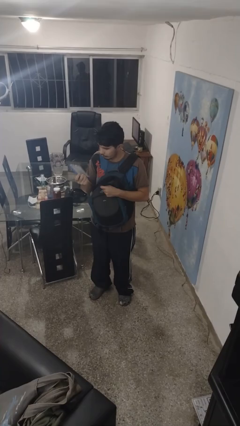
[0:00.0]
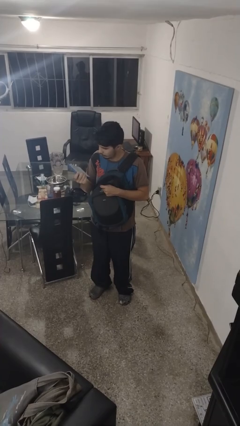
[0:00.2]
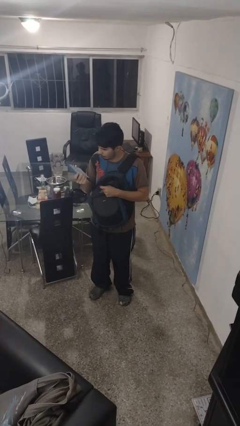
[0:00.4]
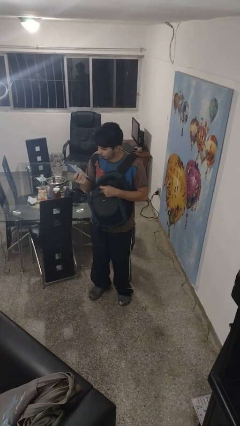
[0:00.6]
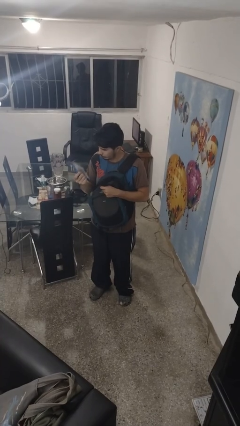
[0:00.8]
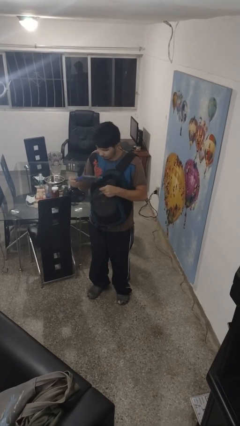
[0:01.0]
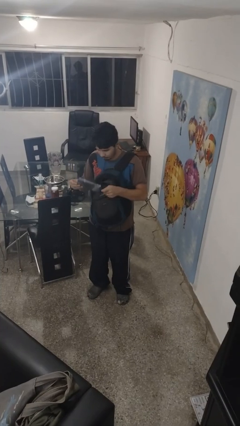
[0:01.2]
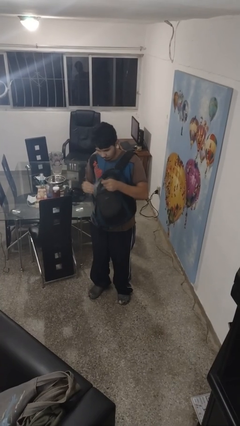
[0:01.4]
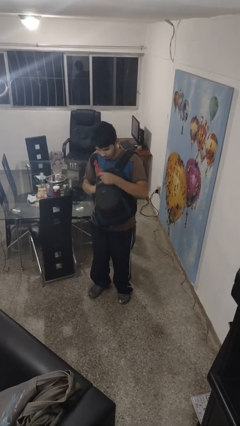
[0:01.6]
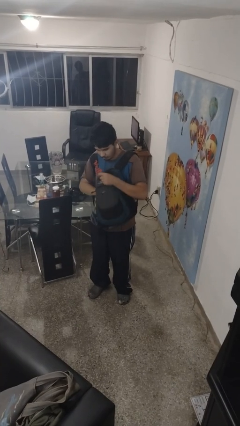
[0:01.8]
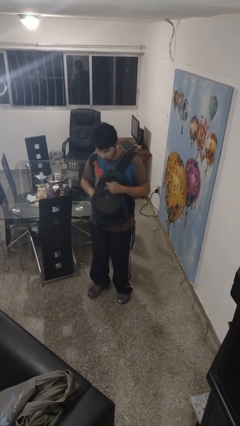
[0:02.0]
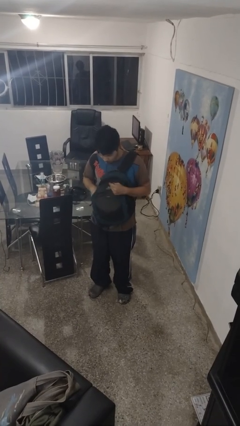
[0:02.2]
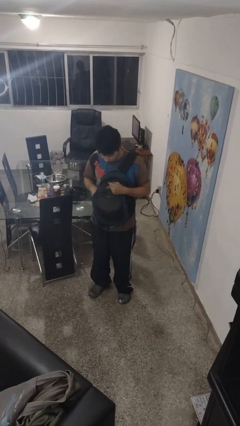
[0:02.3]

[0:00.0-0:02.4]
person puts object into backpack

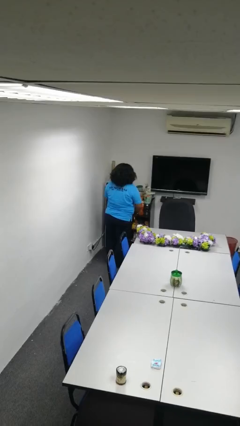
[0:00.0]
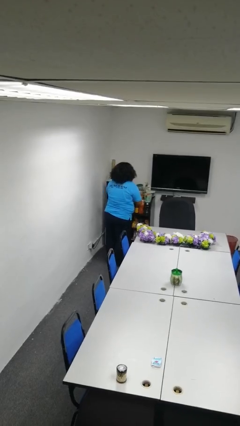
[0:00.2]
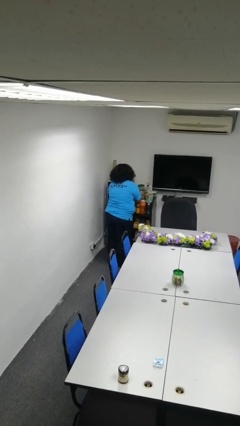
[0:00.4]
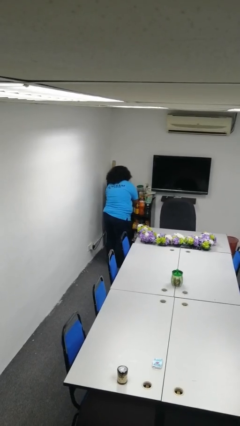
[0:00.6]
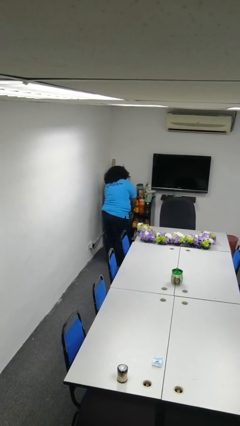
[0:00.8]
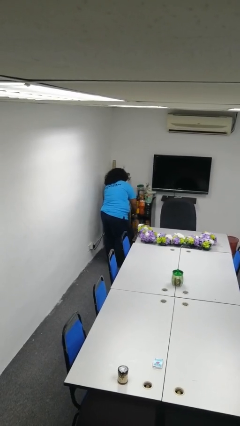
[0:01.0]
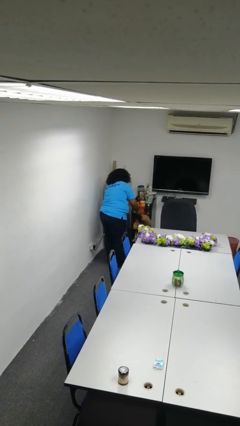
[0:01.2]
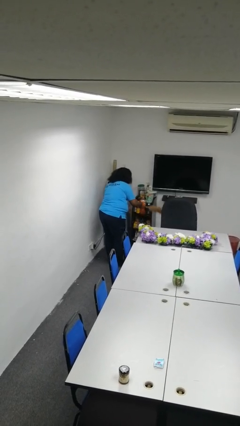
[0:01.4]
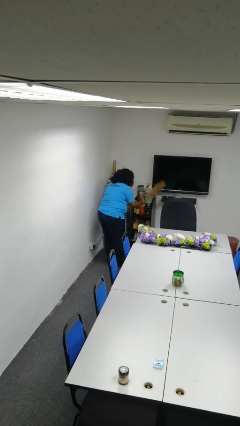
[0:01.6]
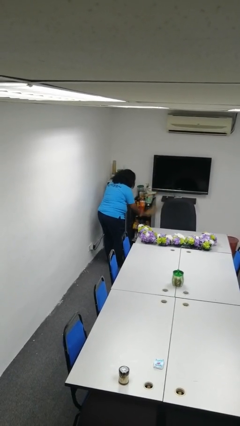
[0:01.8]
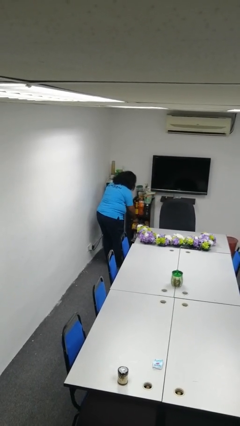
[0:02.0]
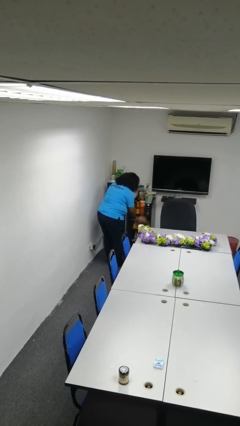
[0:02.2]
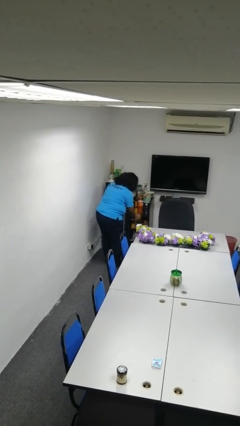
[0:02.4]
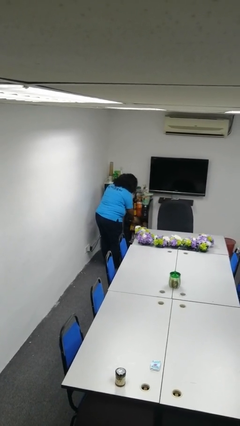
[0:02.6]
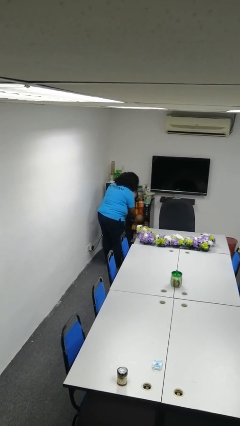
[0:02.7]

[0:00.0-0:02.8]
person dusts furniture

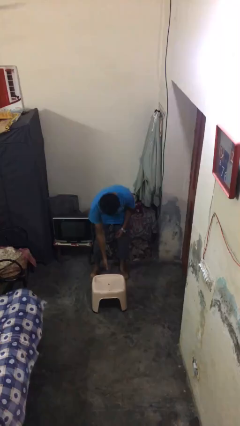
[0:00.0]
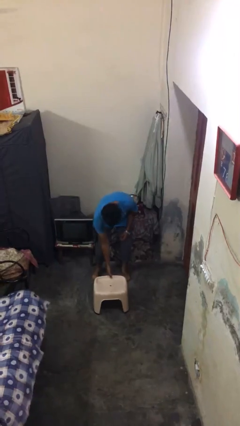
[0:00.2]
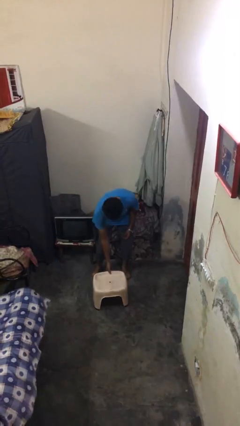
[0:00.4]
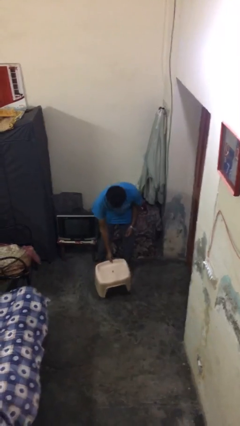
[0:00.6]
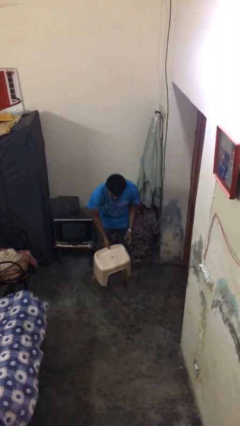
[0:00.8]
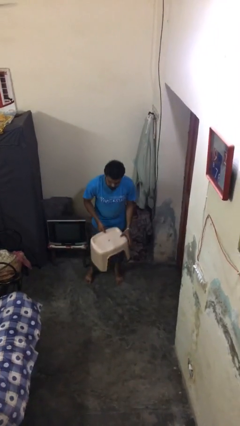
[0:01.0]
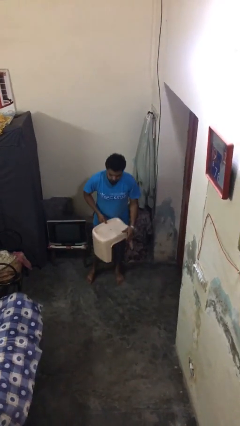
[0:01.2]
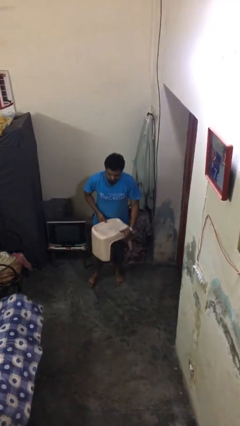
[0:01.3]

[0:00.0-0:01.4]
person picks up object from floor

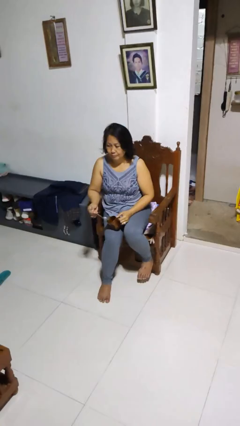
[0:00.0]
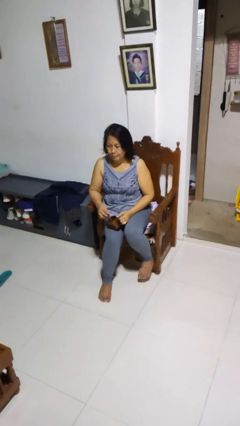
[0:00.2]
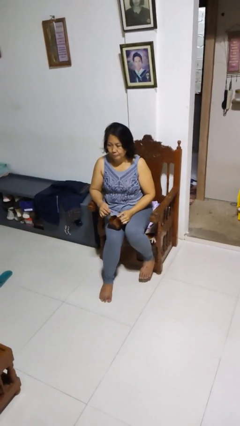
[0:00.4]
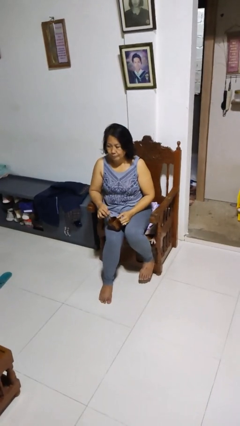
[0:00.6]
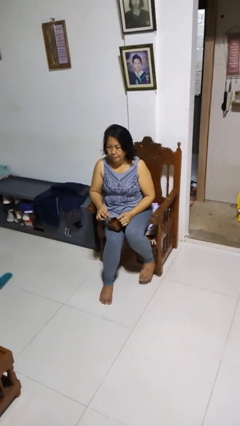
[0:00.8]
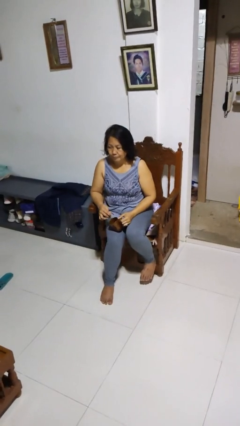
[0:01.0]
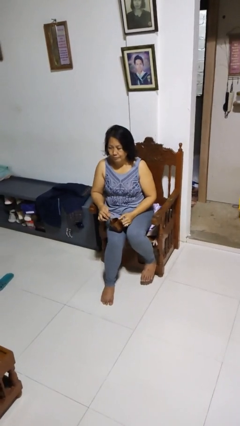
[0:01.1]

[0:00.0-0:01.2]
person stirs mug

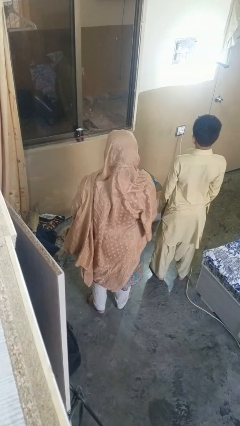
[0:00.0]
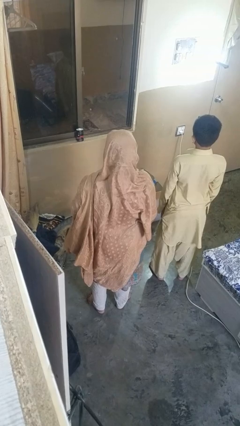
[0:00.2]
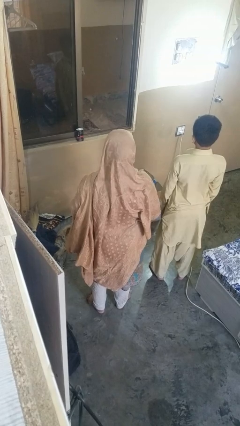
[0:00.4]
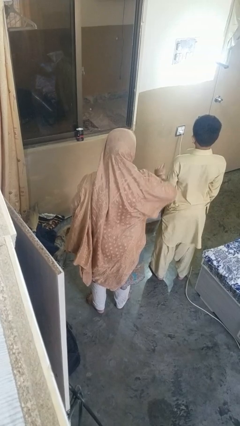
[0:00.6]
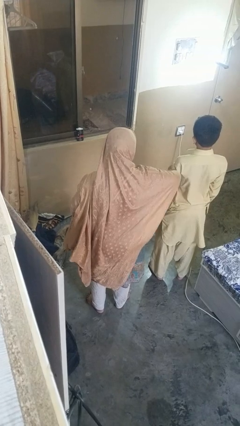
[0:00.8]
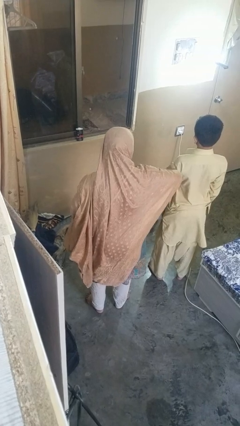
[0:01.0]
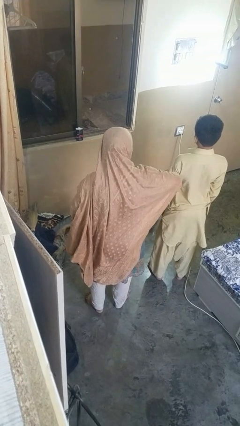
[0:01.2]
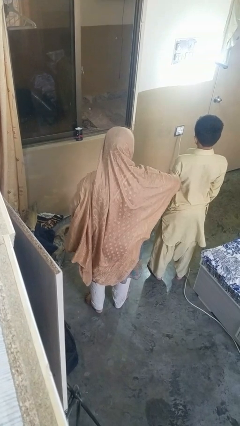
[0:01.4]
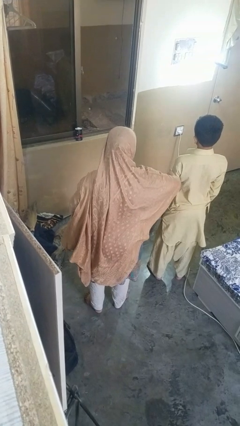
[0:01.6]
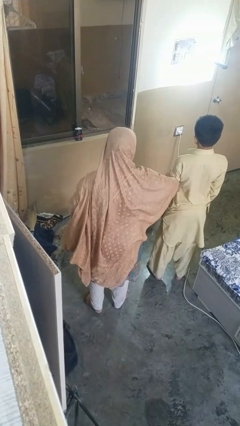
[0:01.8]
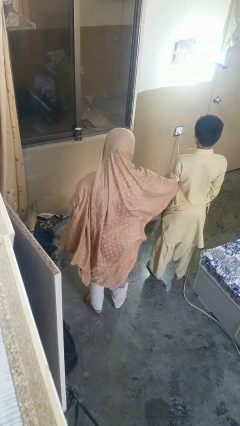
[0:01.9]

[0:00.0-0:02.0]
person grabs person by bicep

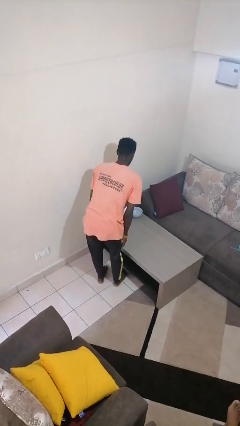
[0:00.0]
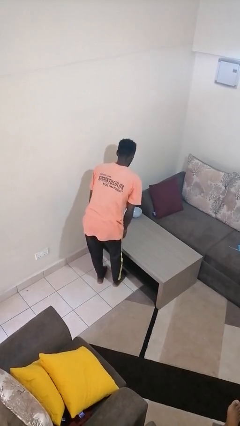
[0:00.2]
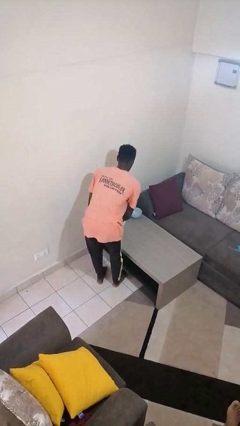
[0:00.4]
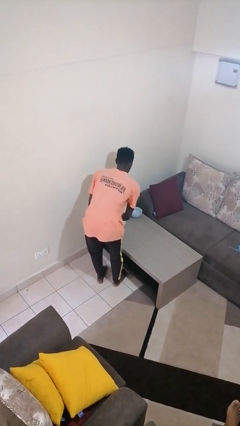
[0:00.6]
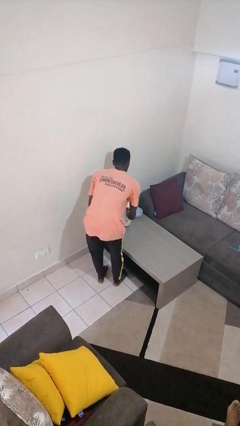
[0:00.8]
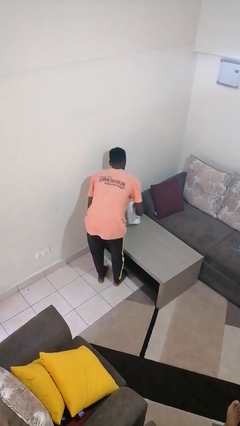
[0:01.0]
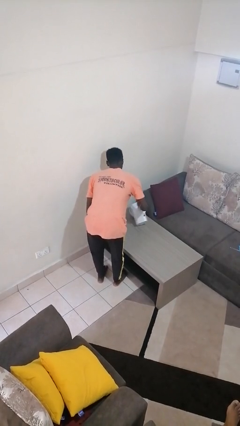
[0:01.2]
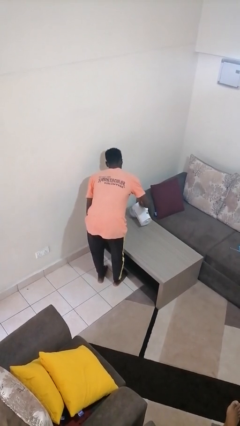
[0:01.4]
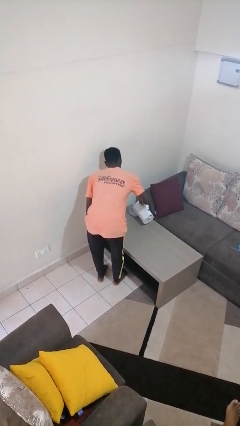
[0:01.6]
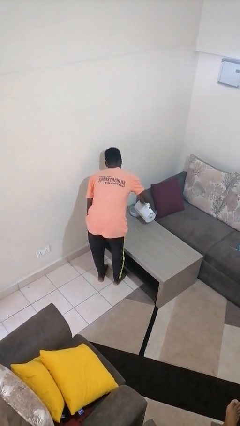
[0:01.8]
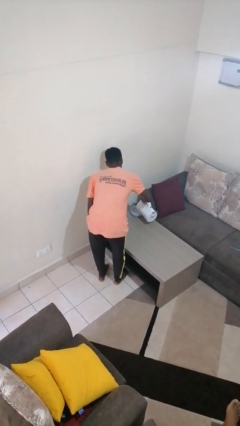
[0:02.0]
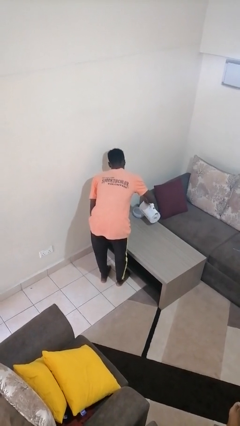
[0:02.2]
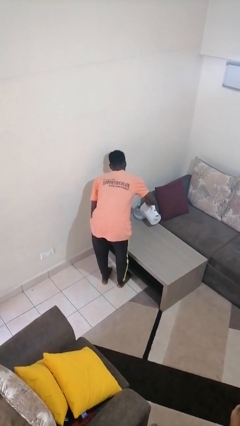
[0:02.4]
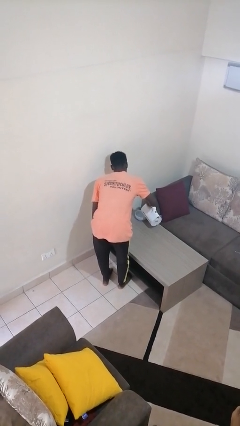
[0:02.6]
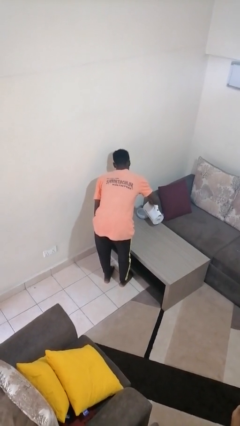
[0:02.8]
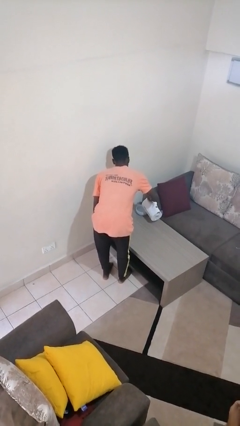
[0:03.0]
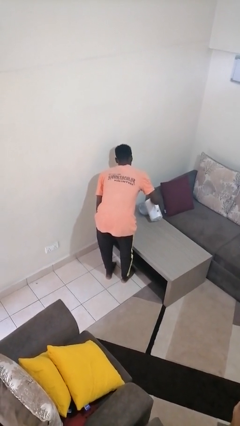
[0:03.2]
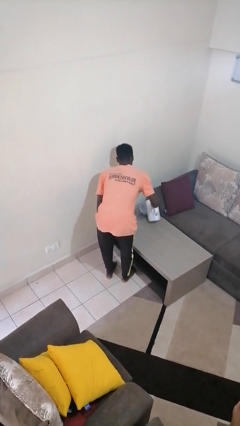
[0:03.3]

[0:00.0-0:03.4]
person pours into bowl

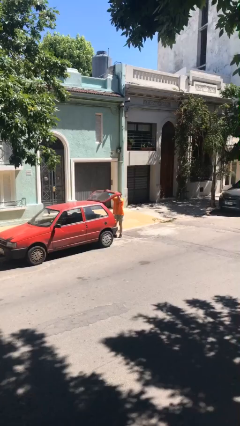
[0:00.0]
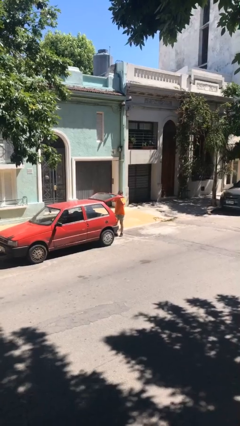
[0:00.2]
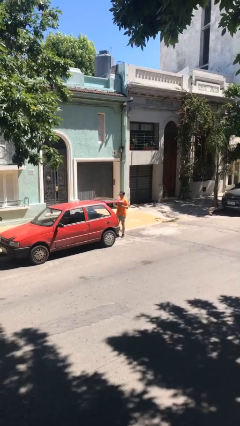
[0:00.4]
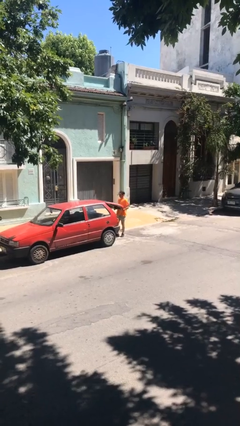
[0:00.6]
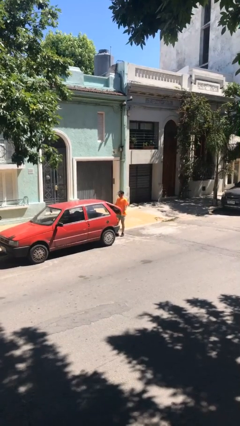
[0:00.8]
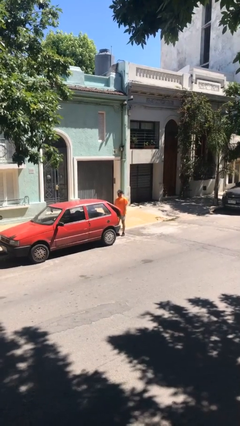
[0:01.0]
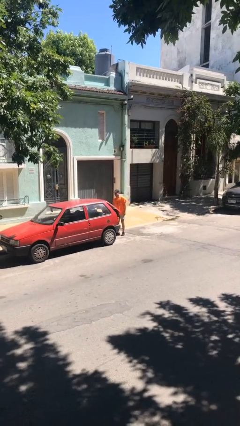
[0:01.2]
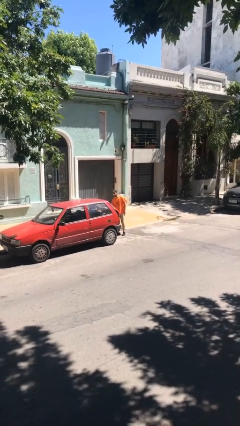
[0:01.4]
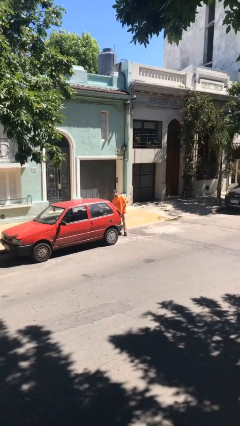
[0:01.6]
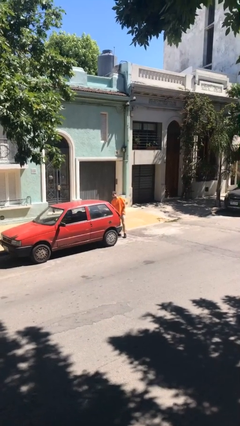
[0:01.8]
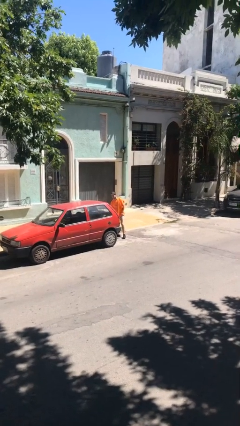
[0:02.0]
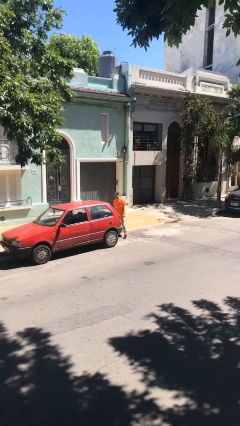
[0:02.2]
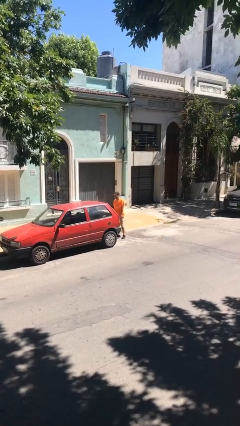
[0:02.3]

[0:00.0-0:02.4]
person closes car trunk

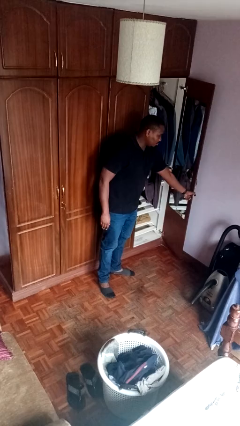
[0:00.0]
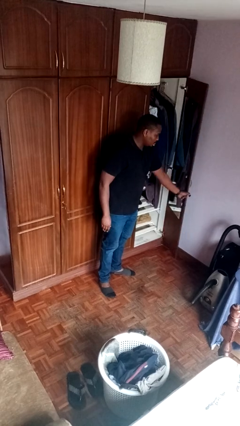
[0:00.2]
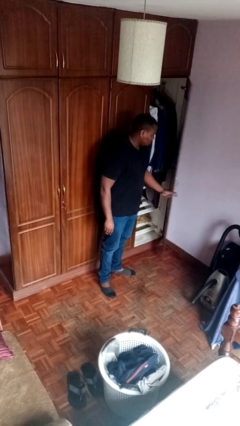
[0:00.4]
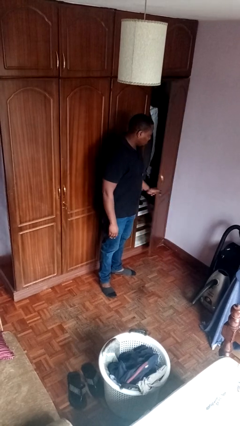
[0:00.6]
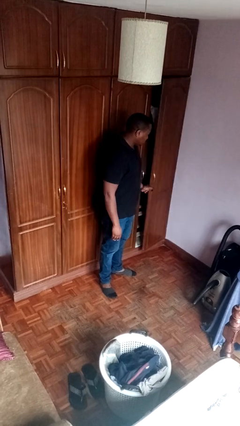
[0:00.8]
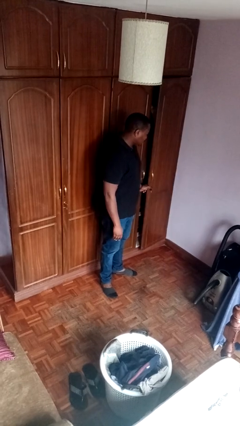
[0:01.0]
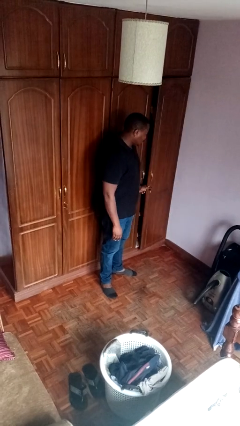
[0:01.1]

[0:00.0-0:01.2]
person closes closet door

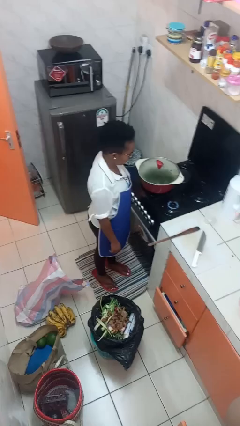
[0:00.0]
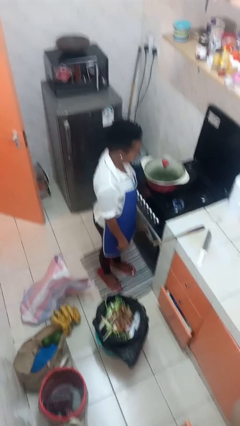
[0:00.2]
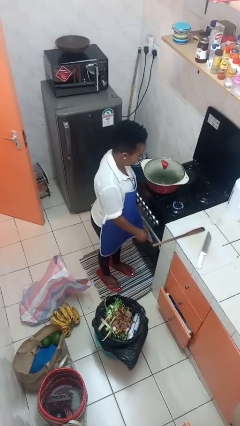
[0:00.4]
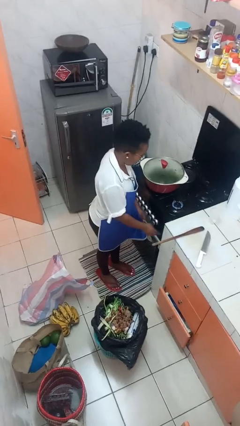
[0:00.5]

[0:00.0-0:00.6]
person turns off stovetop
